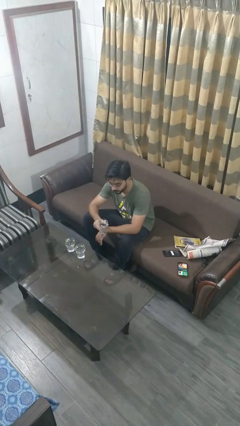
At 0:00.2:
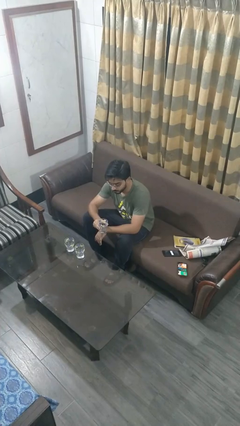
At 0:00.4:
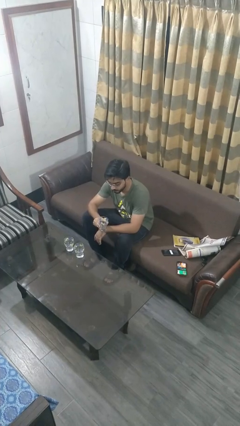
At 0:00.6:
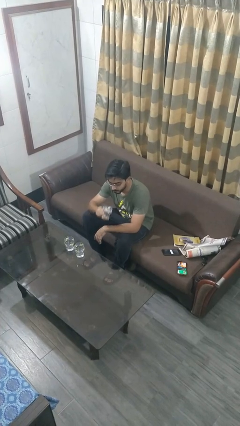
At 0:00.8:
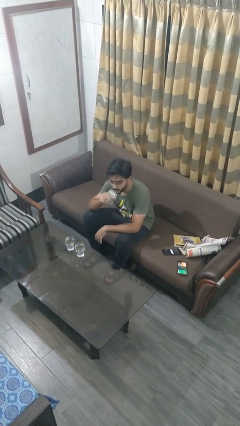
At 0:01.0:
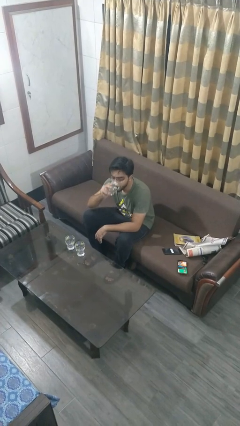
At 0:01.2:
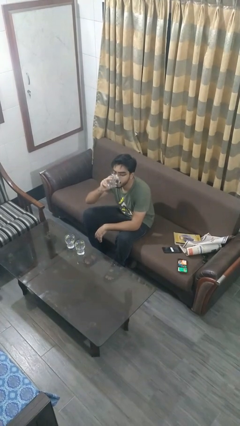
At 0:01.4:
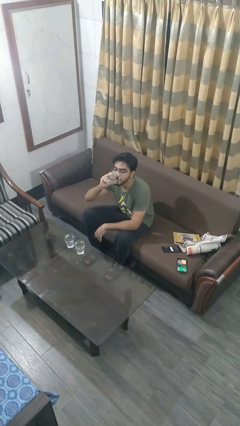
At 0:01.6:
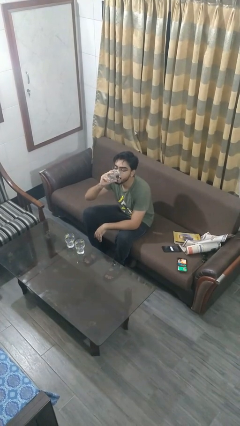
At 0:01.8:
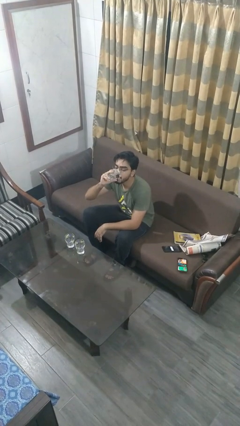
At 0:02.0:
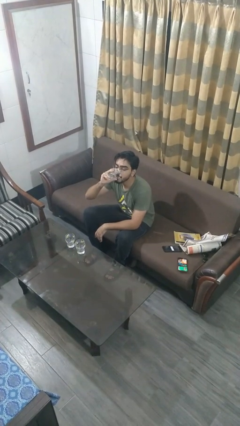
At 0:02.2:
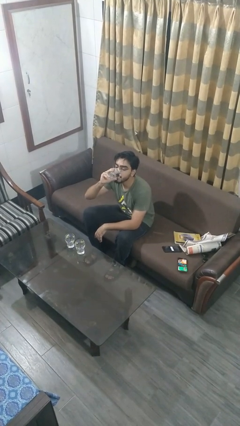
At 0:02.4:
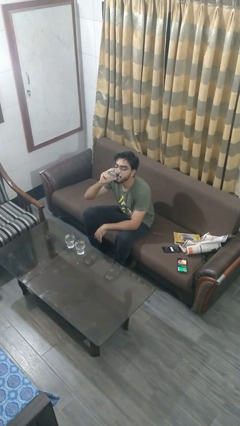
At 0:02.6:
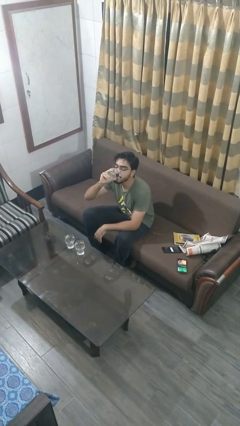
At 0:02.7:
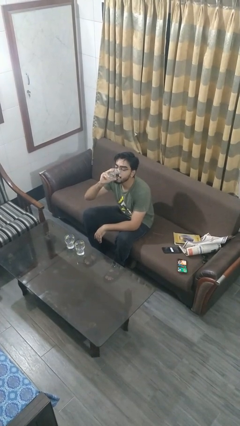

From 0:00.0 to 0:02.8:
person drinks from shotglass

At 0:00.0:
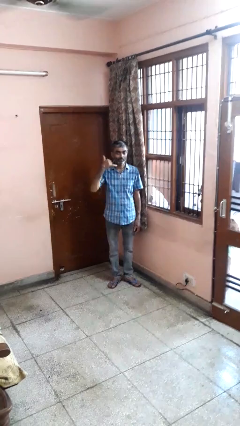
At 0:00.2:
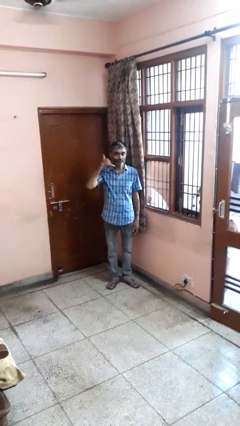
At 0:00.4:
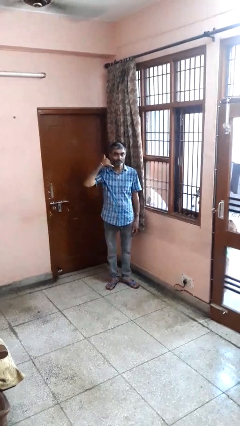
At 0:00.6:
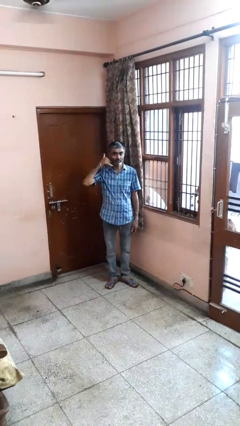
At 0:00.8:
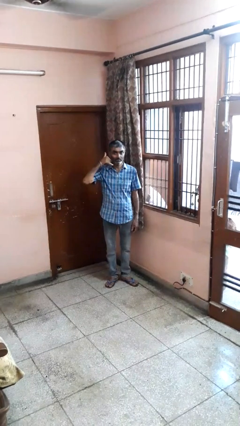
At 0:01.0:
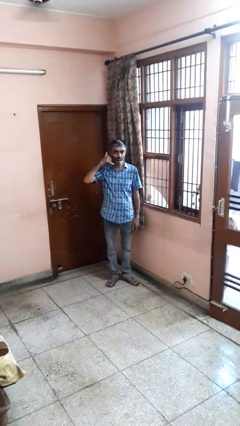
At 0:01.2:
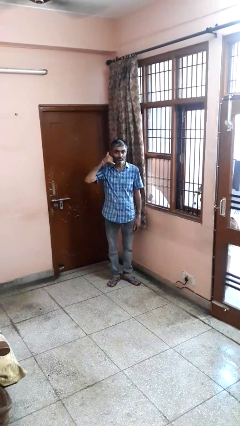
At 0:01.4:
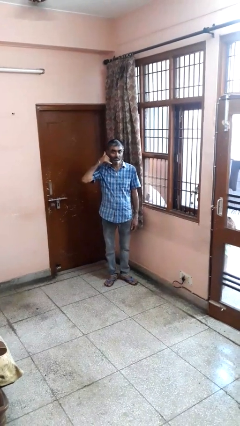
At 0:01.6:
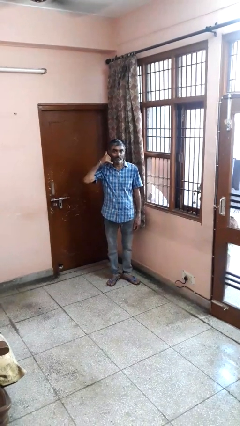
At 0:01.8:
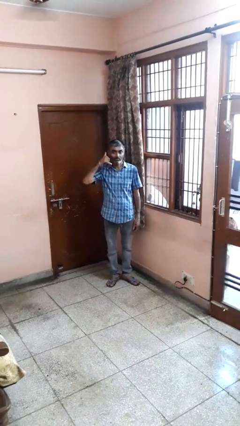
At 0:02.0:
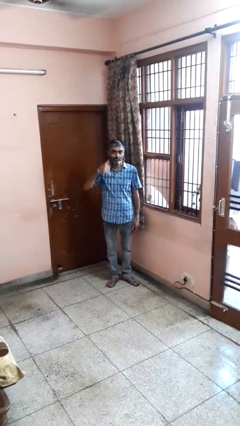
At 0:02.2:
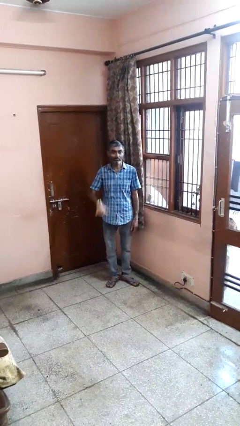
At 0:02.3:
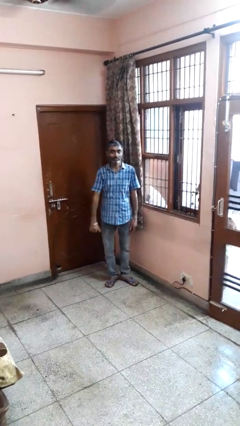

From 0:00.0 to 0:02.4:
person gestures call me

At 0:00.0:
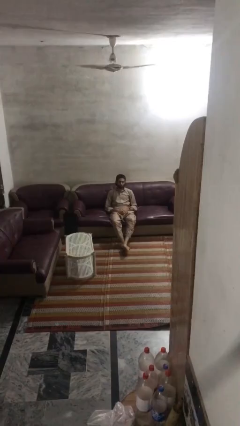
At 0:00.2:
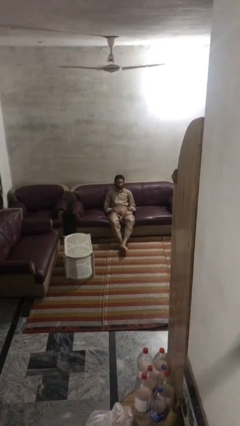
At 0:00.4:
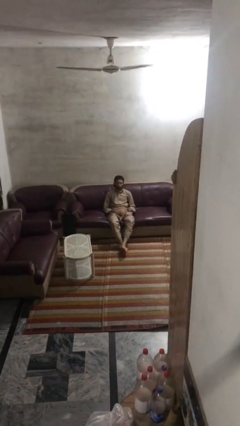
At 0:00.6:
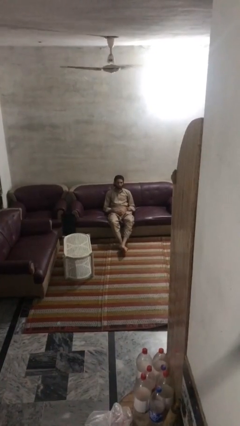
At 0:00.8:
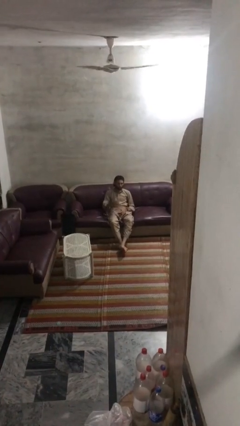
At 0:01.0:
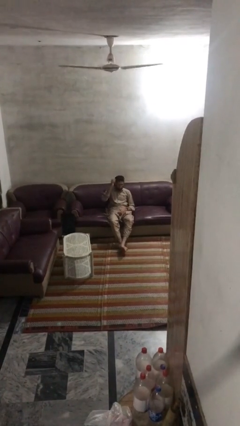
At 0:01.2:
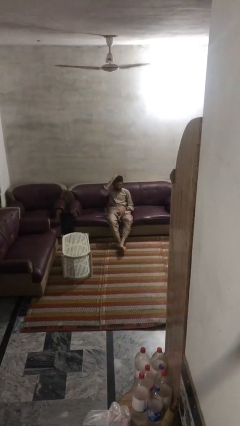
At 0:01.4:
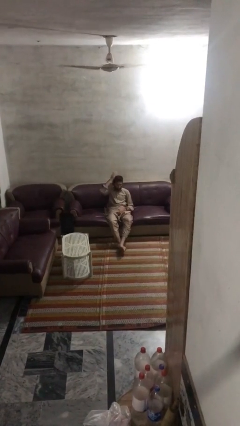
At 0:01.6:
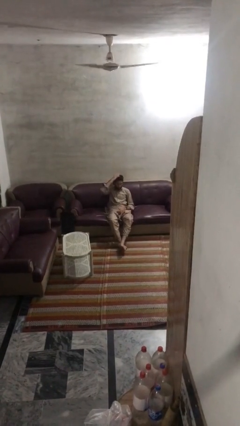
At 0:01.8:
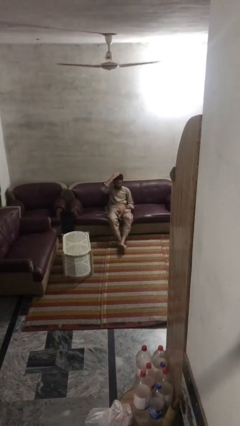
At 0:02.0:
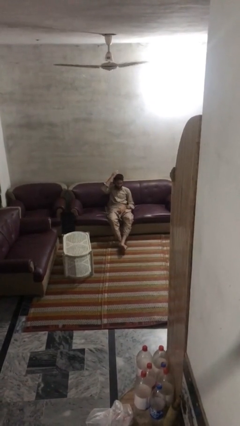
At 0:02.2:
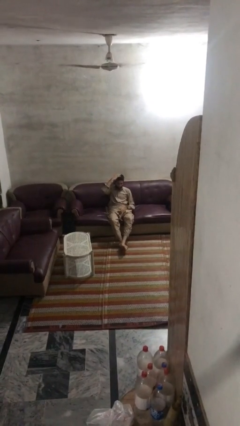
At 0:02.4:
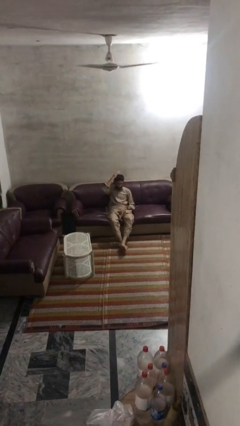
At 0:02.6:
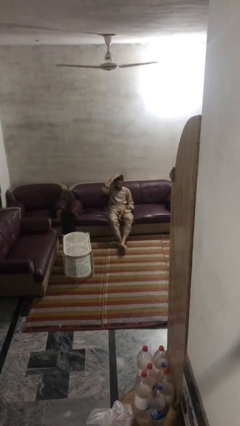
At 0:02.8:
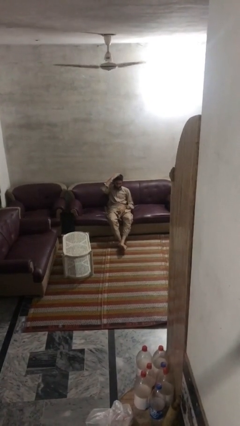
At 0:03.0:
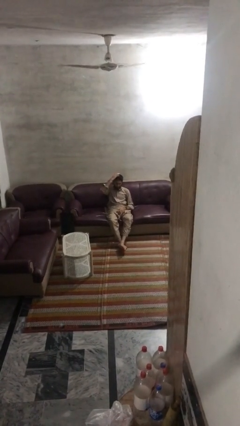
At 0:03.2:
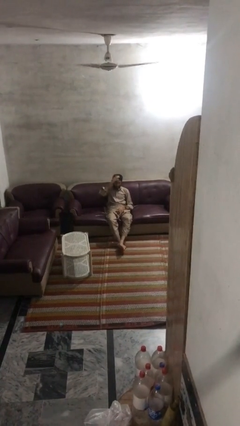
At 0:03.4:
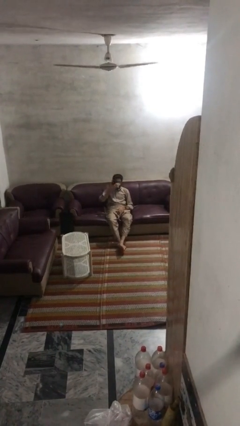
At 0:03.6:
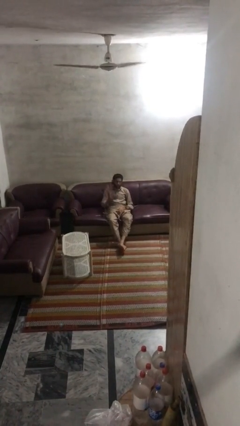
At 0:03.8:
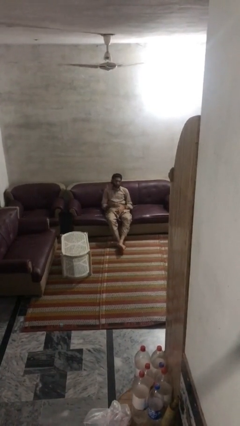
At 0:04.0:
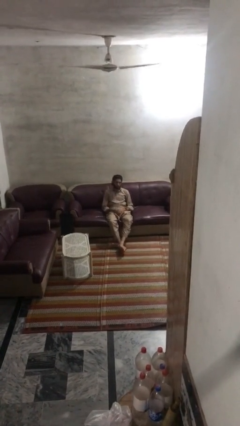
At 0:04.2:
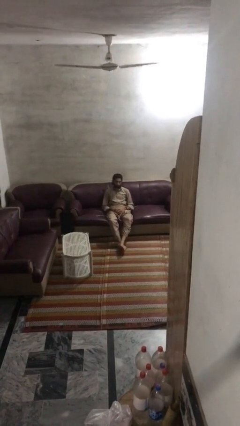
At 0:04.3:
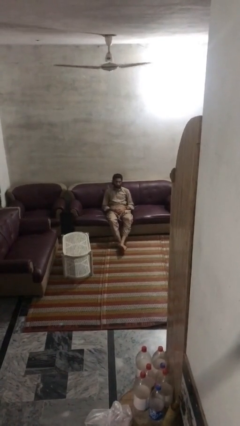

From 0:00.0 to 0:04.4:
person pats head

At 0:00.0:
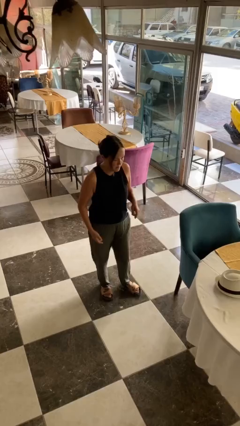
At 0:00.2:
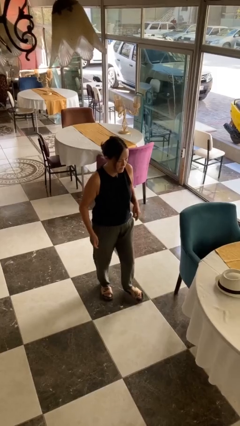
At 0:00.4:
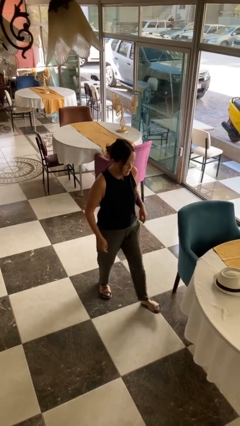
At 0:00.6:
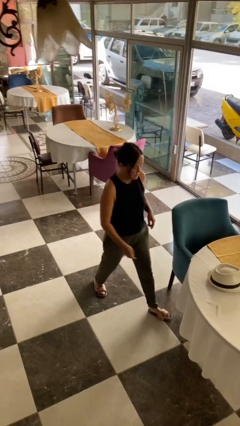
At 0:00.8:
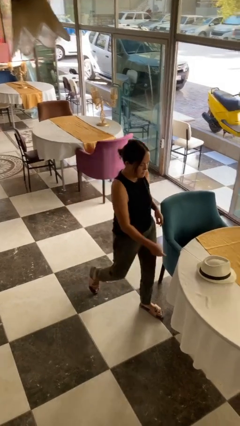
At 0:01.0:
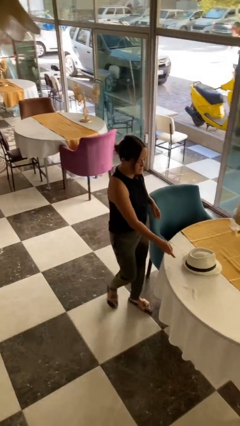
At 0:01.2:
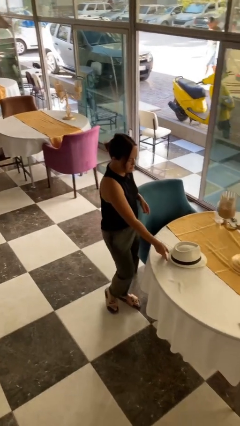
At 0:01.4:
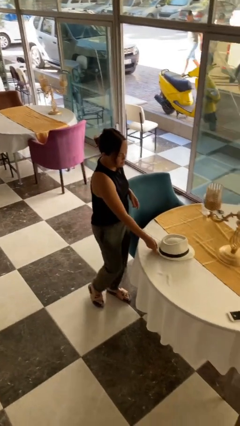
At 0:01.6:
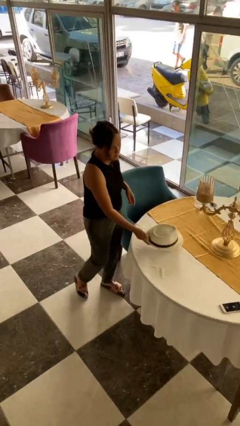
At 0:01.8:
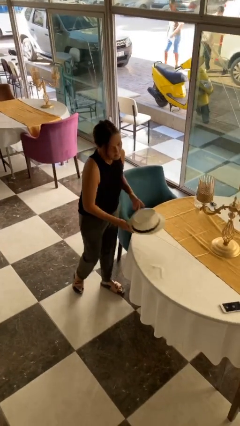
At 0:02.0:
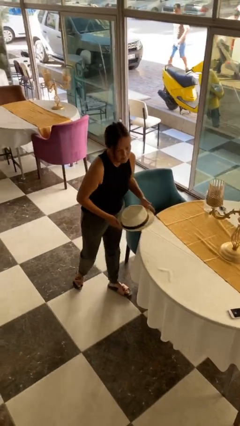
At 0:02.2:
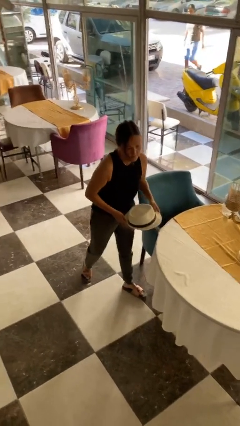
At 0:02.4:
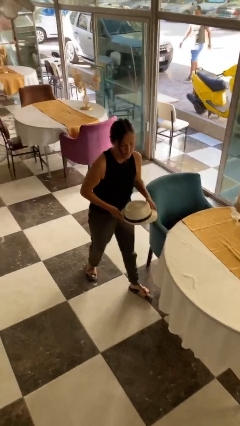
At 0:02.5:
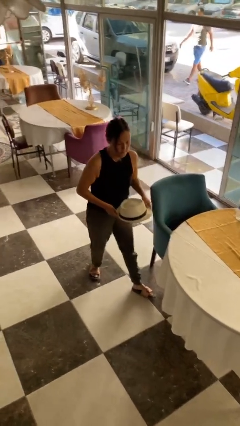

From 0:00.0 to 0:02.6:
person picks up object from table

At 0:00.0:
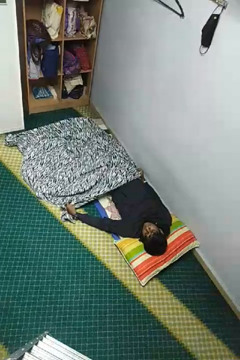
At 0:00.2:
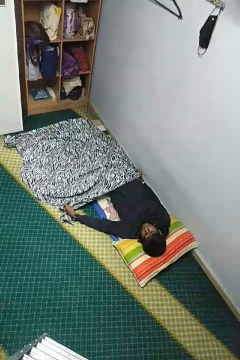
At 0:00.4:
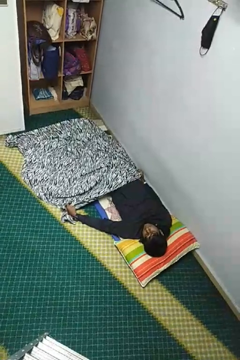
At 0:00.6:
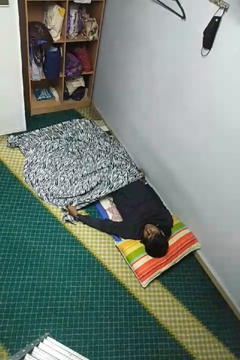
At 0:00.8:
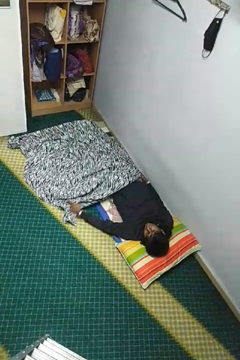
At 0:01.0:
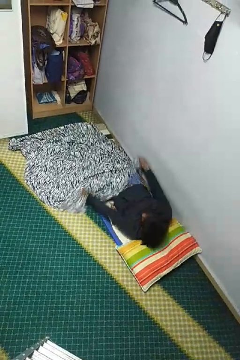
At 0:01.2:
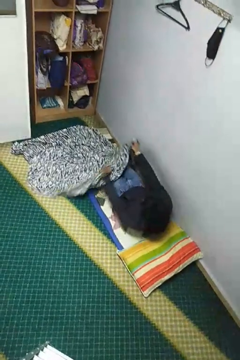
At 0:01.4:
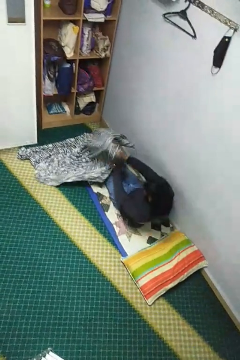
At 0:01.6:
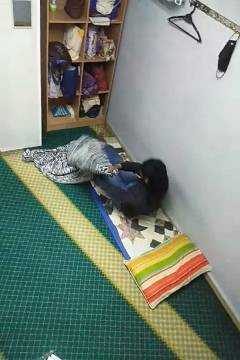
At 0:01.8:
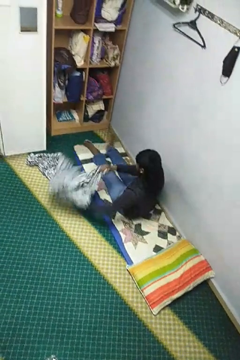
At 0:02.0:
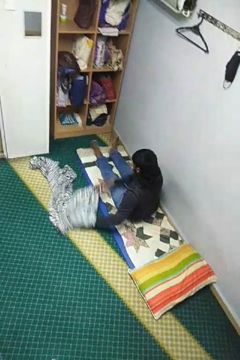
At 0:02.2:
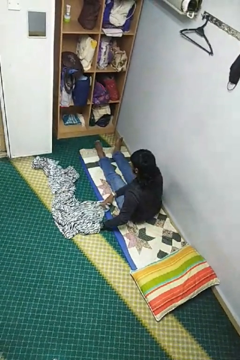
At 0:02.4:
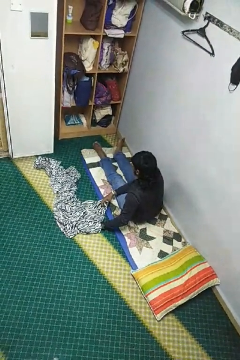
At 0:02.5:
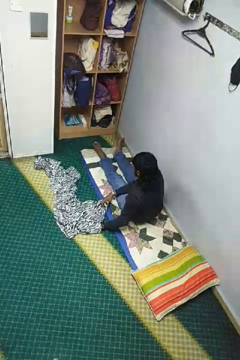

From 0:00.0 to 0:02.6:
person uncovers with blanket

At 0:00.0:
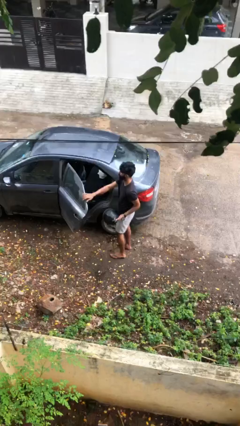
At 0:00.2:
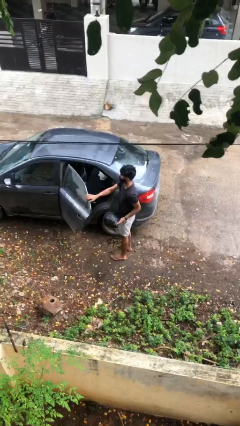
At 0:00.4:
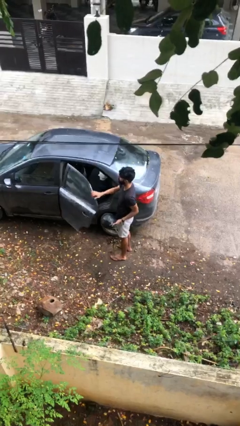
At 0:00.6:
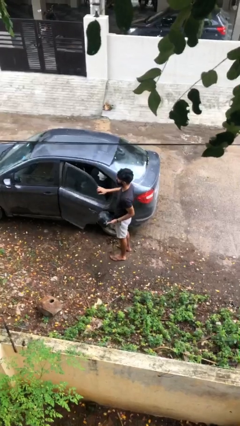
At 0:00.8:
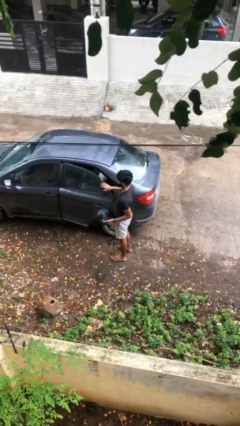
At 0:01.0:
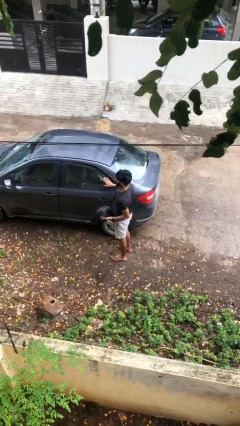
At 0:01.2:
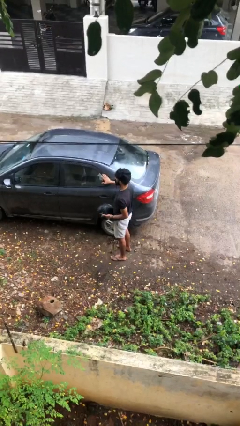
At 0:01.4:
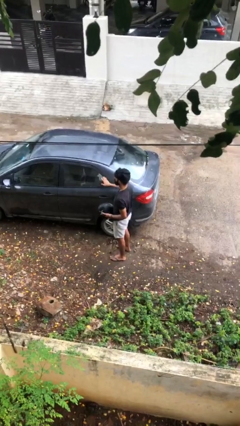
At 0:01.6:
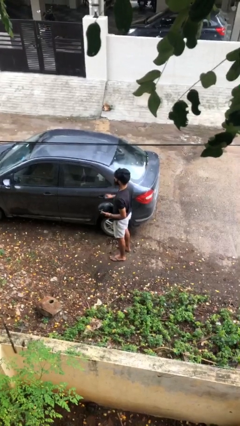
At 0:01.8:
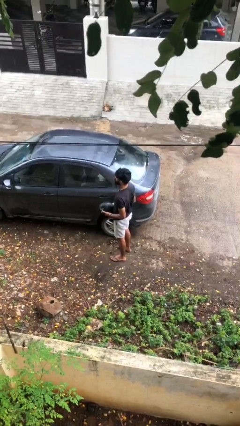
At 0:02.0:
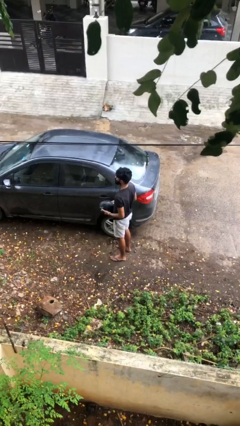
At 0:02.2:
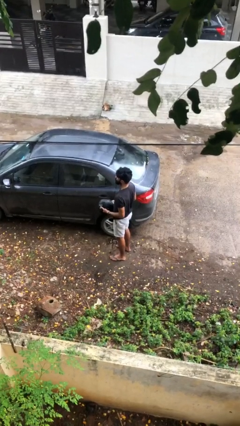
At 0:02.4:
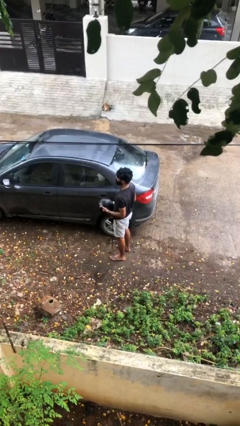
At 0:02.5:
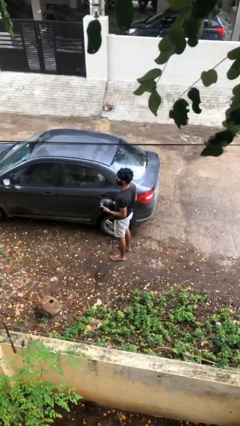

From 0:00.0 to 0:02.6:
person closes car door

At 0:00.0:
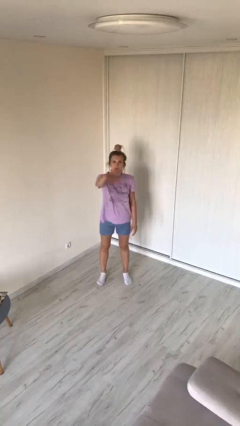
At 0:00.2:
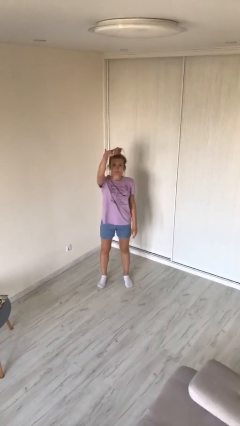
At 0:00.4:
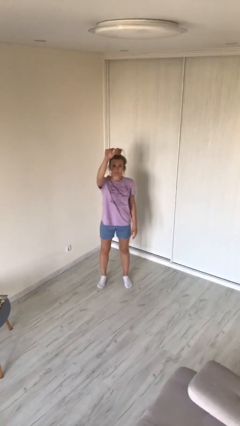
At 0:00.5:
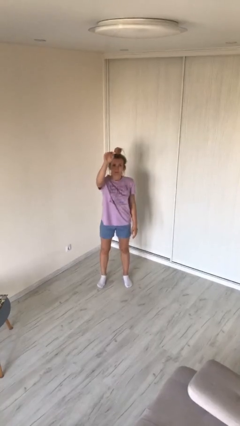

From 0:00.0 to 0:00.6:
person gestures swipe up
